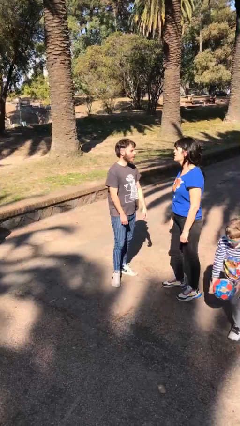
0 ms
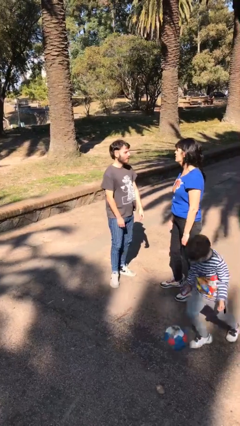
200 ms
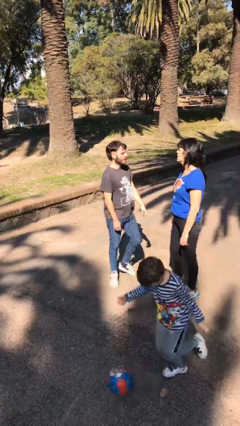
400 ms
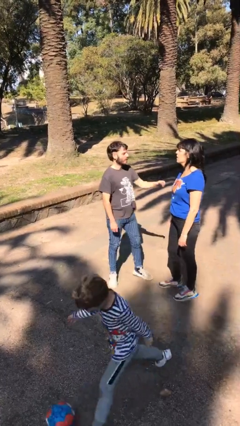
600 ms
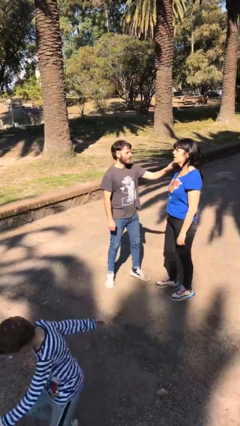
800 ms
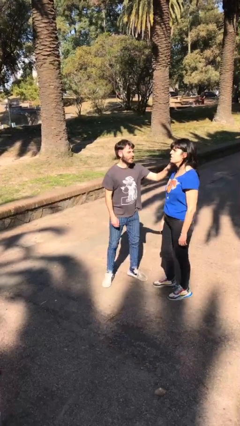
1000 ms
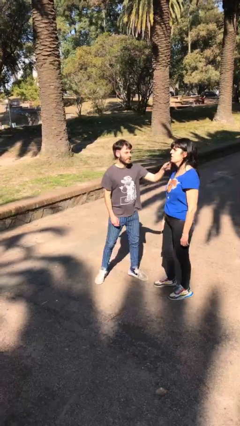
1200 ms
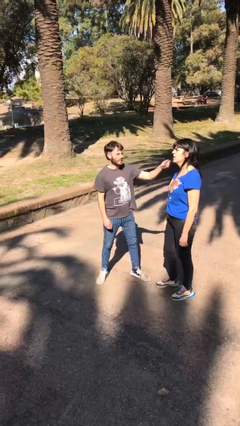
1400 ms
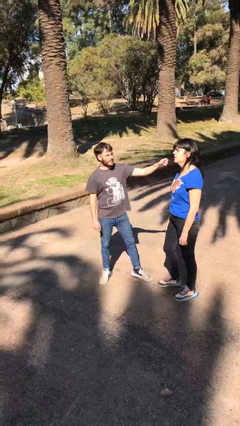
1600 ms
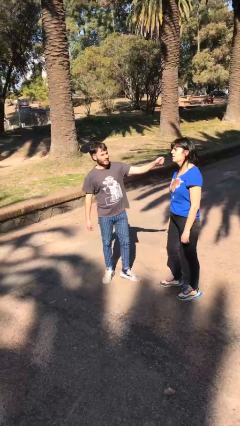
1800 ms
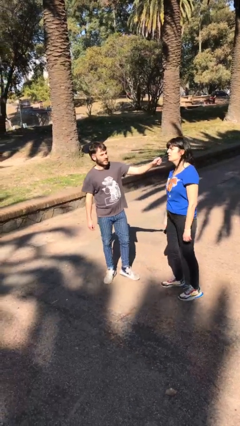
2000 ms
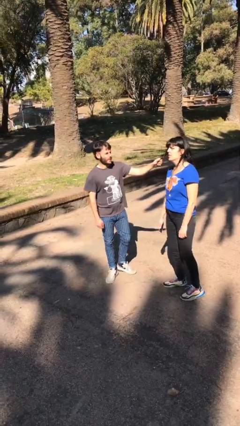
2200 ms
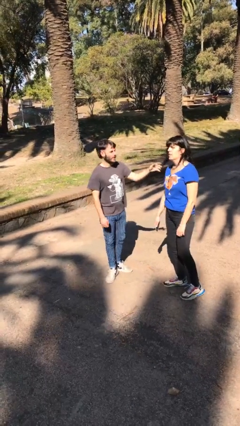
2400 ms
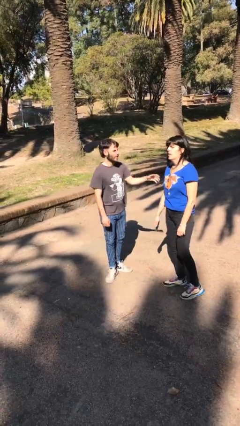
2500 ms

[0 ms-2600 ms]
person grabs person by hair

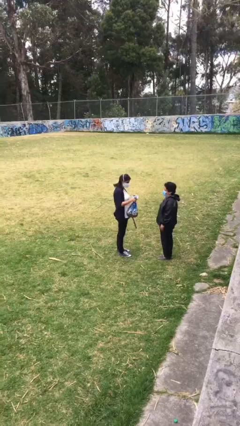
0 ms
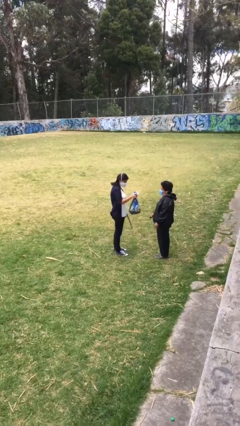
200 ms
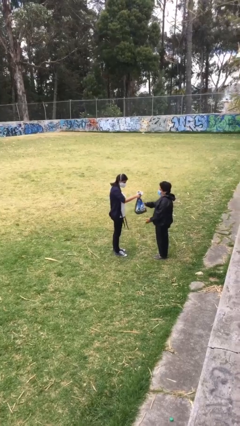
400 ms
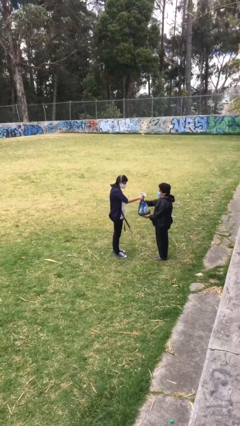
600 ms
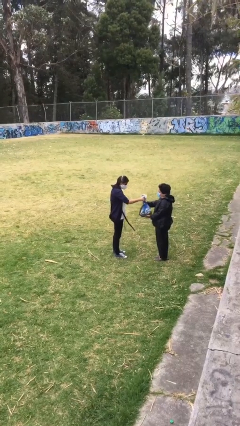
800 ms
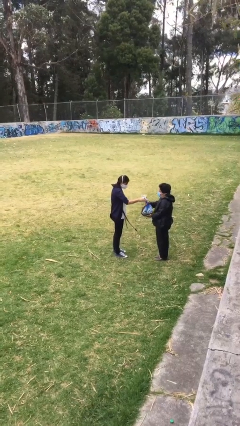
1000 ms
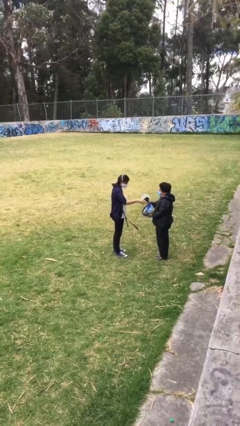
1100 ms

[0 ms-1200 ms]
person transfers object to person

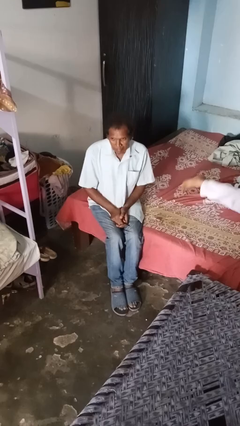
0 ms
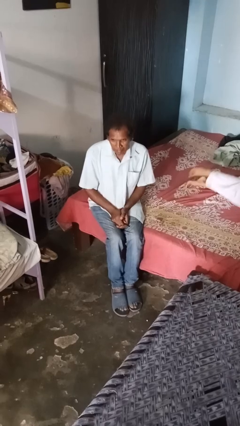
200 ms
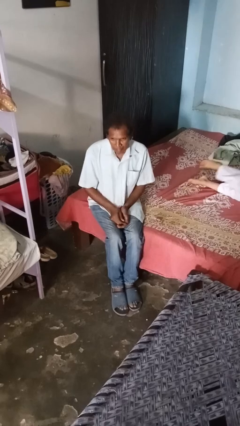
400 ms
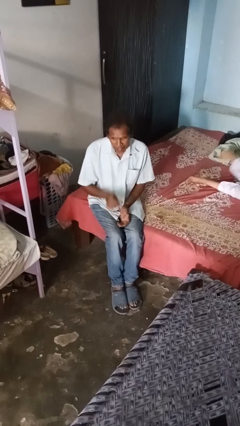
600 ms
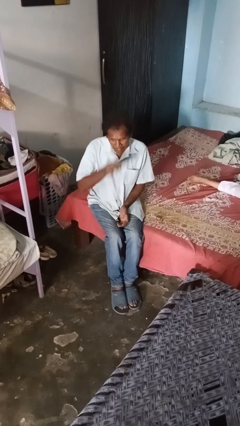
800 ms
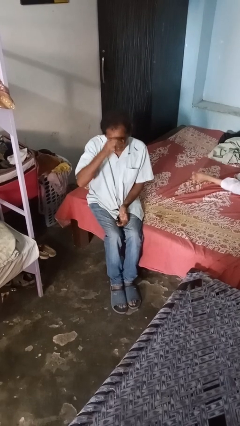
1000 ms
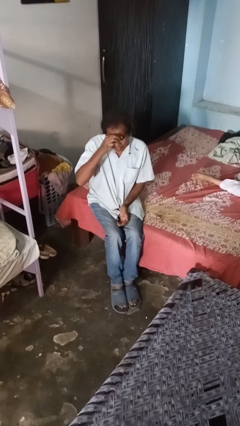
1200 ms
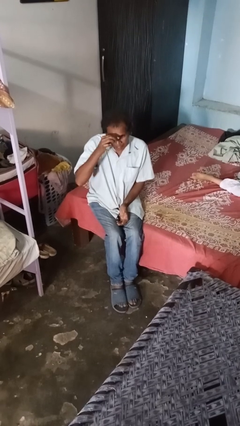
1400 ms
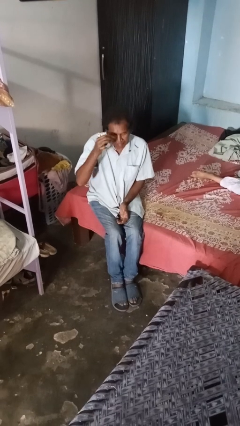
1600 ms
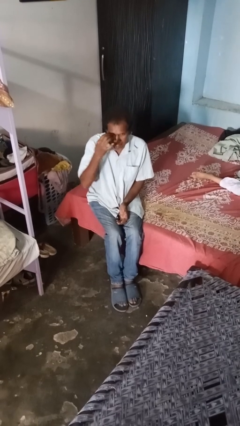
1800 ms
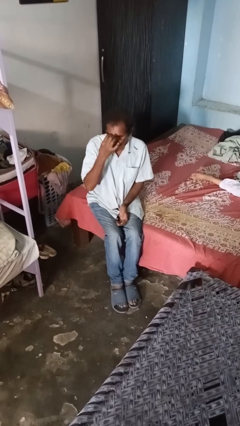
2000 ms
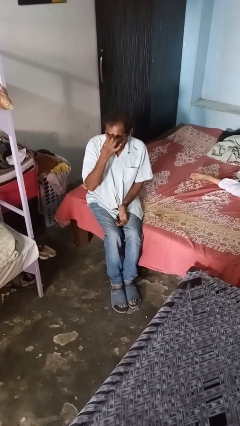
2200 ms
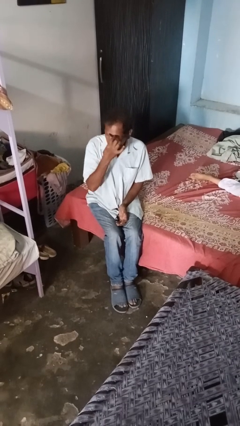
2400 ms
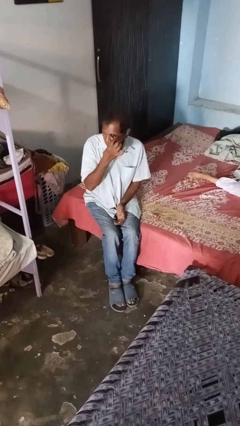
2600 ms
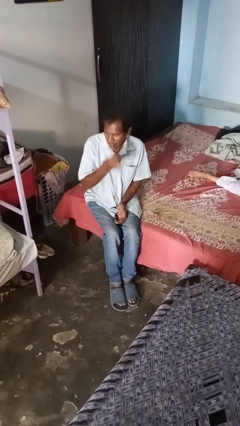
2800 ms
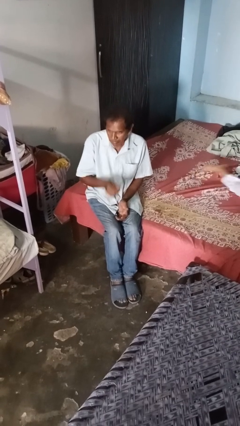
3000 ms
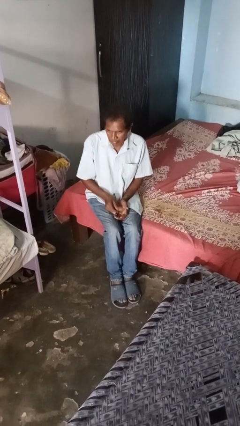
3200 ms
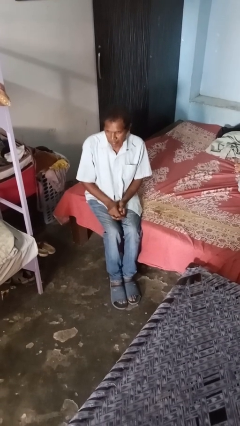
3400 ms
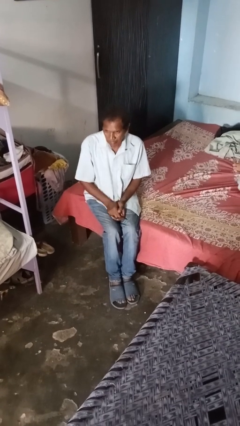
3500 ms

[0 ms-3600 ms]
person applies eye makeup

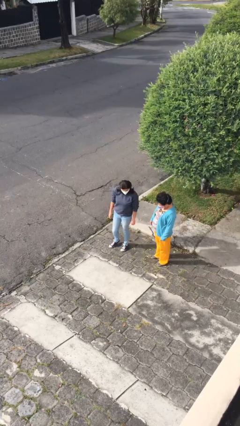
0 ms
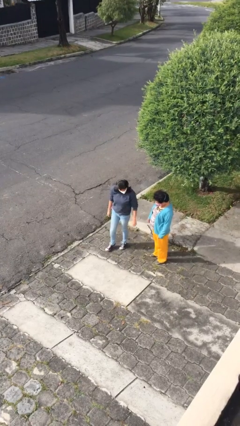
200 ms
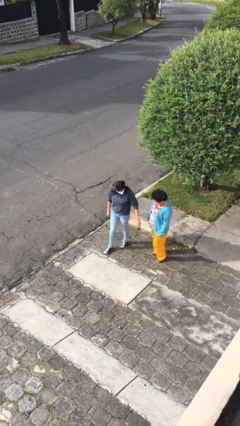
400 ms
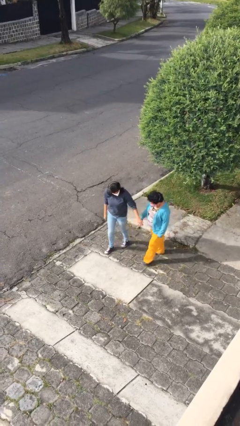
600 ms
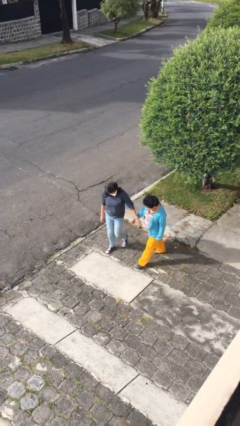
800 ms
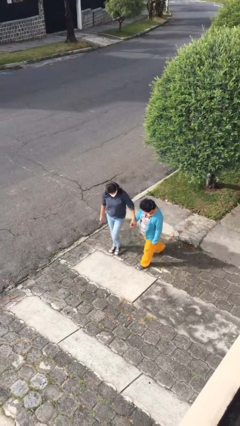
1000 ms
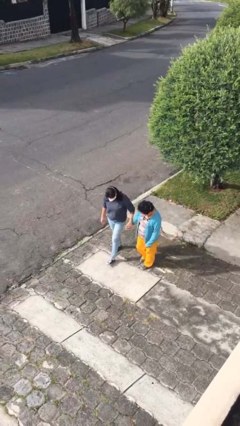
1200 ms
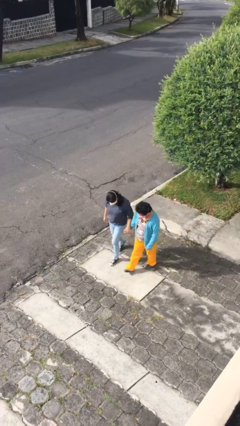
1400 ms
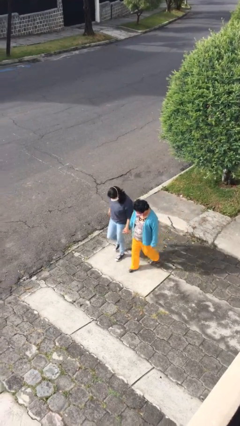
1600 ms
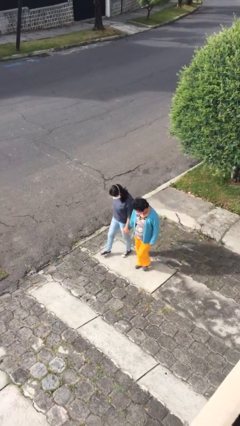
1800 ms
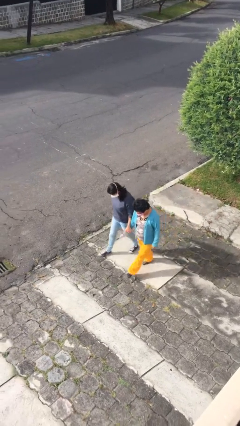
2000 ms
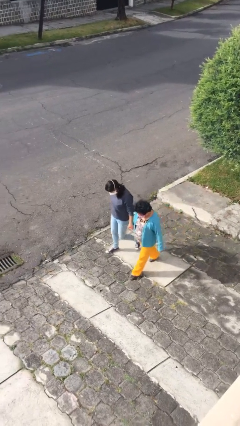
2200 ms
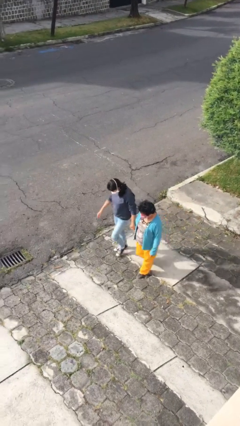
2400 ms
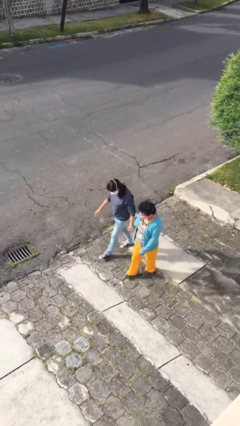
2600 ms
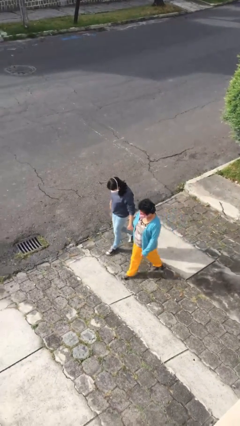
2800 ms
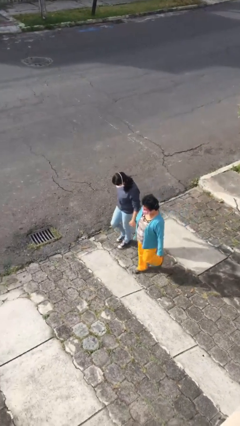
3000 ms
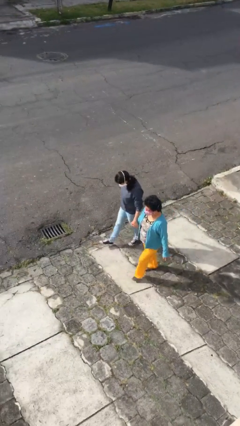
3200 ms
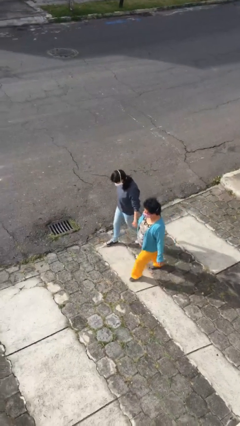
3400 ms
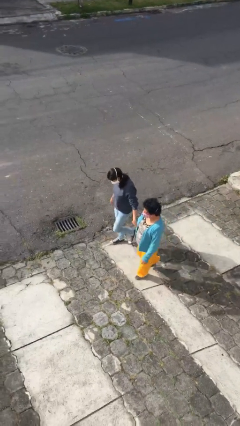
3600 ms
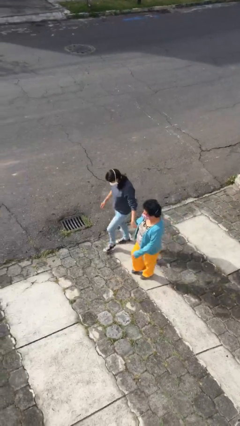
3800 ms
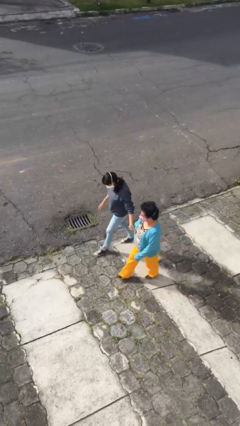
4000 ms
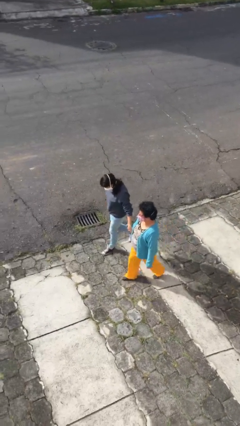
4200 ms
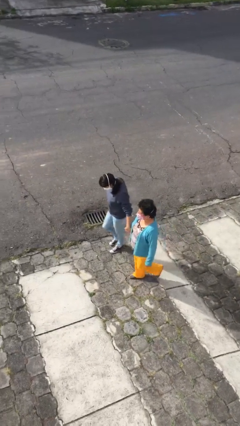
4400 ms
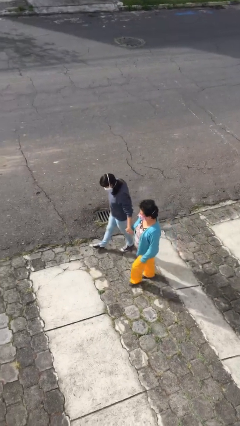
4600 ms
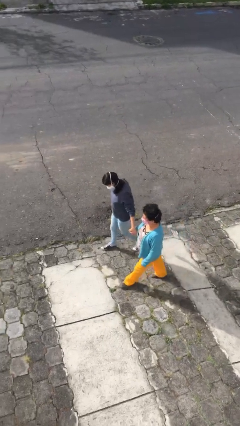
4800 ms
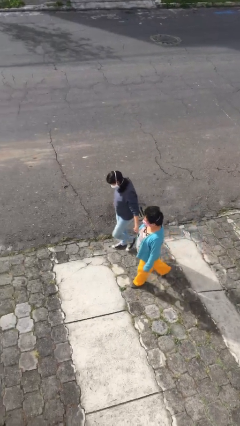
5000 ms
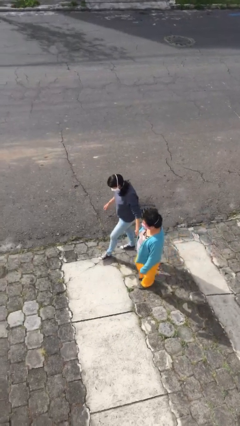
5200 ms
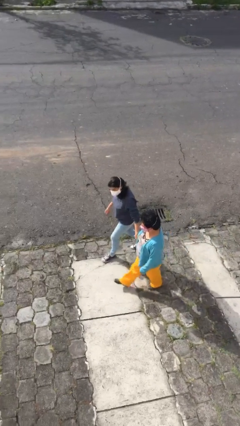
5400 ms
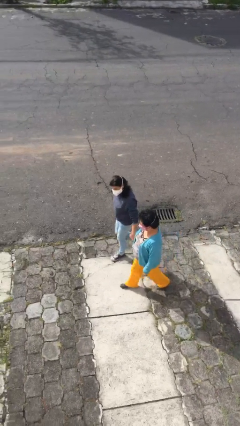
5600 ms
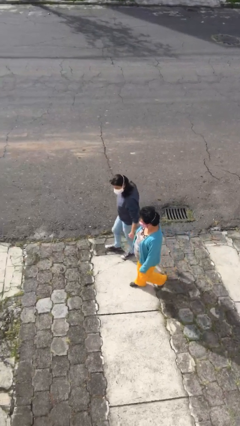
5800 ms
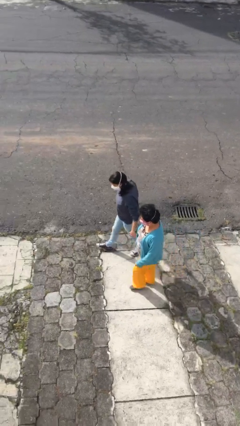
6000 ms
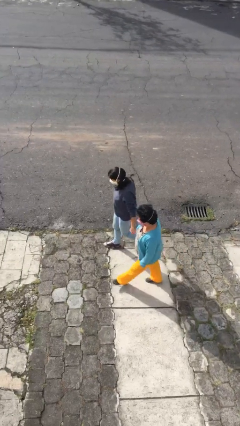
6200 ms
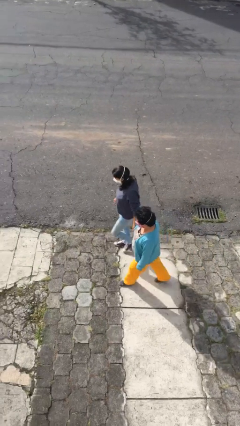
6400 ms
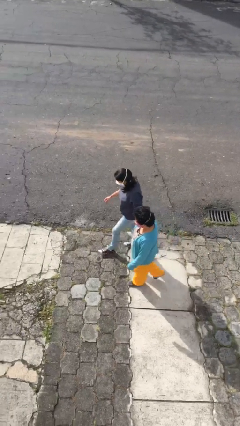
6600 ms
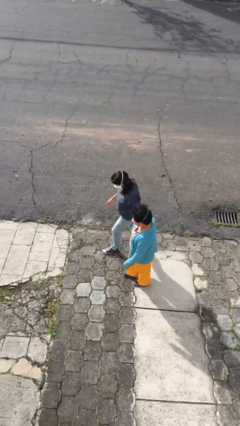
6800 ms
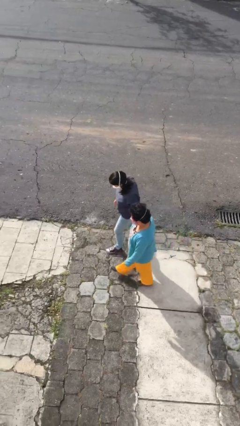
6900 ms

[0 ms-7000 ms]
person holds hand

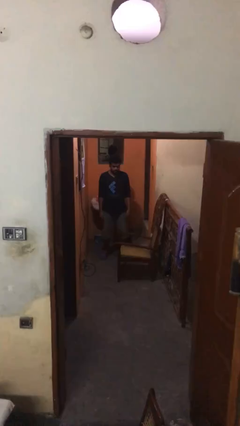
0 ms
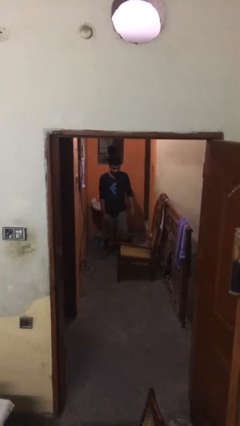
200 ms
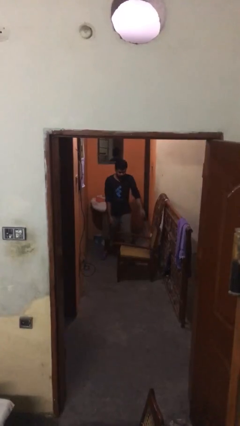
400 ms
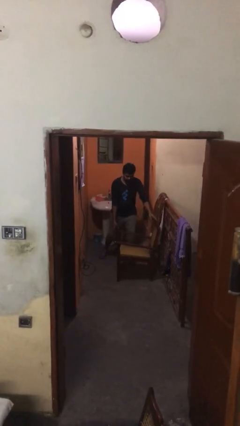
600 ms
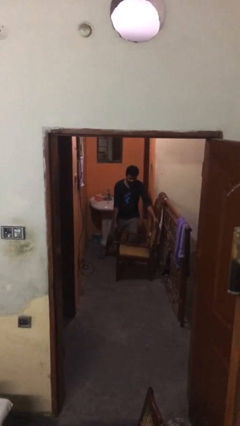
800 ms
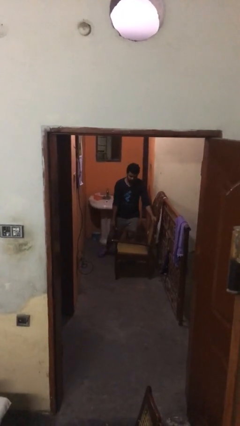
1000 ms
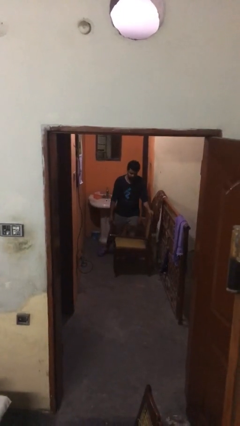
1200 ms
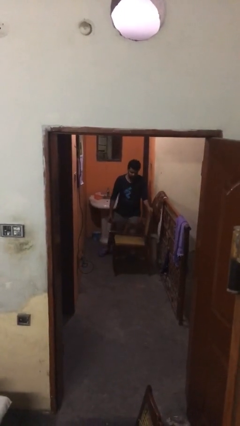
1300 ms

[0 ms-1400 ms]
person picks up object from floor

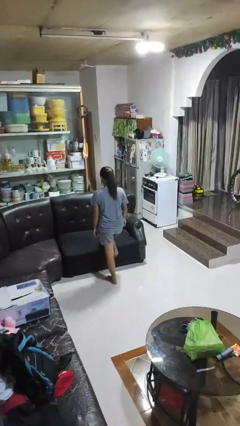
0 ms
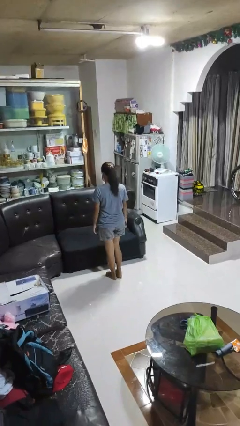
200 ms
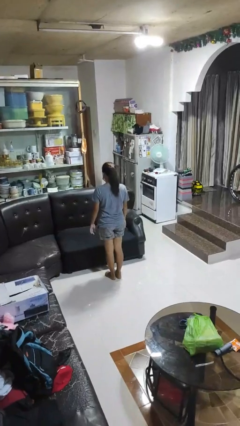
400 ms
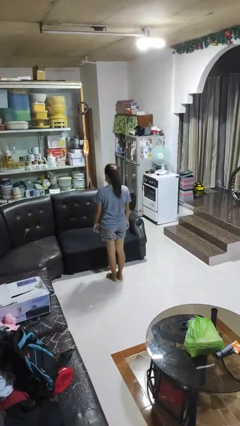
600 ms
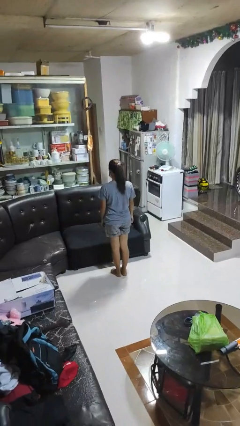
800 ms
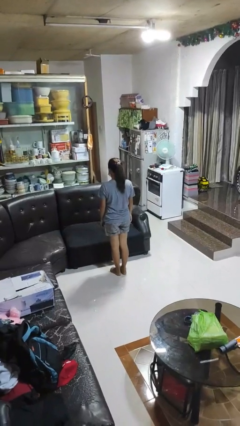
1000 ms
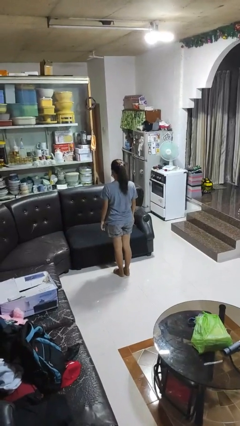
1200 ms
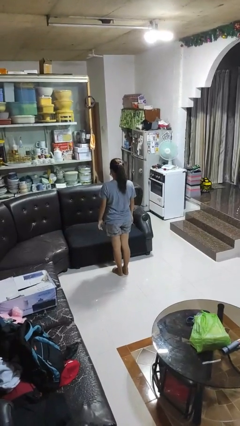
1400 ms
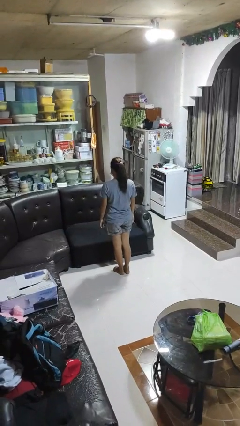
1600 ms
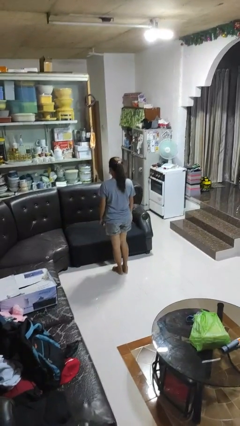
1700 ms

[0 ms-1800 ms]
person climbs off couch
